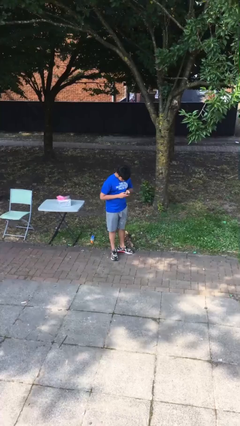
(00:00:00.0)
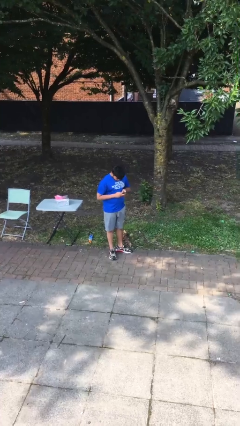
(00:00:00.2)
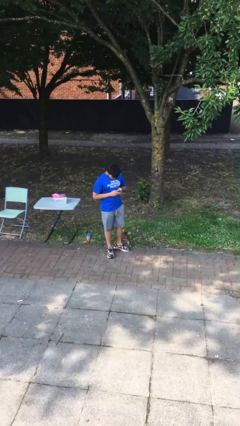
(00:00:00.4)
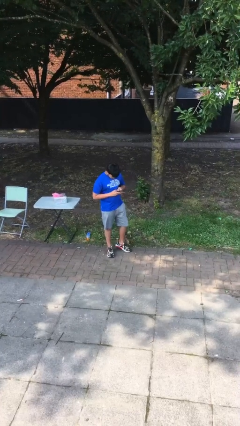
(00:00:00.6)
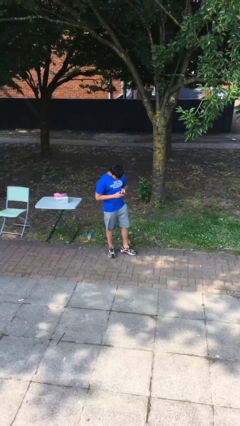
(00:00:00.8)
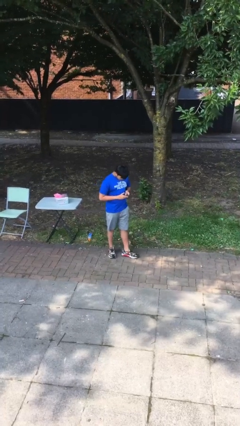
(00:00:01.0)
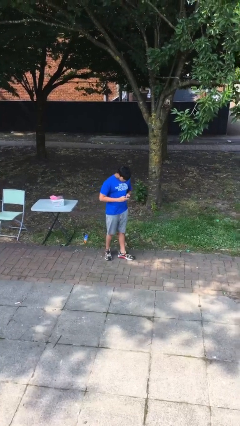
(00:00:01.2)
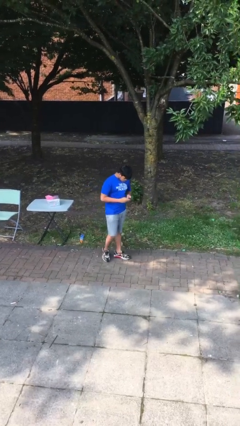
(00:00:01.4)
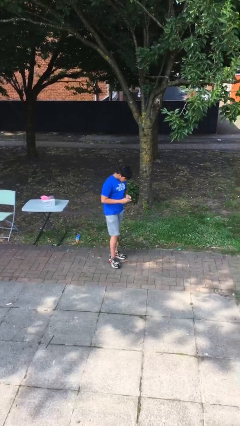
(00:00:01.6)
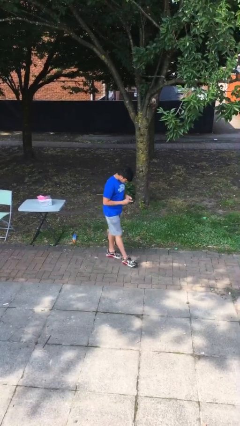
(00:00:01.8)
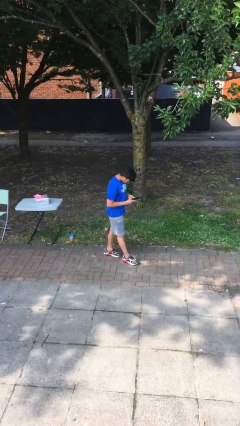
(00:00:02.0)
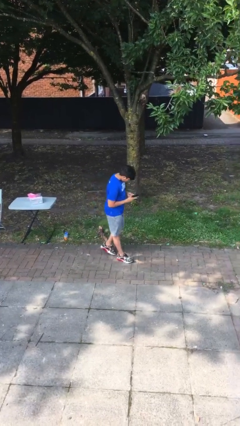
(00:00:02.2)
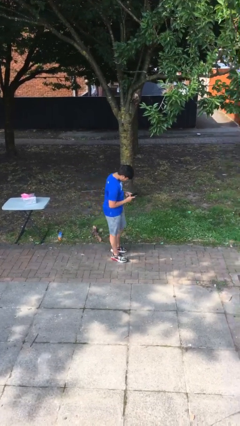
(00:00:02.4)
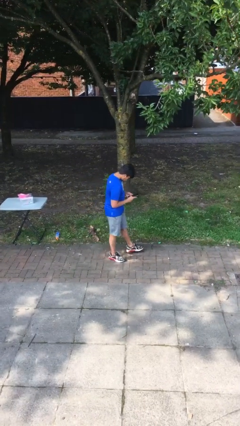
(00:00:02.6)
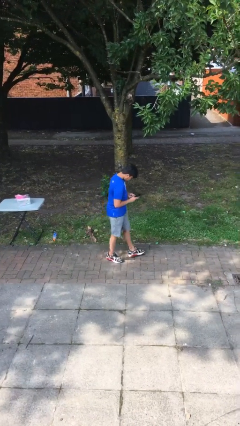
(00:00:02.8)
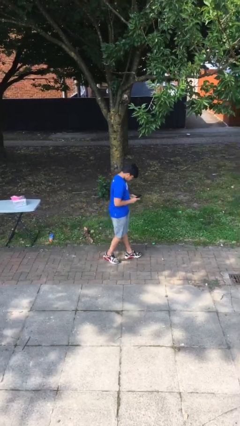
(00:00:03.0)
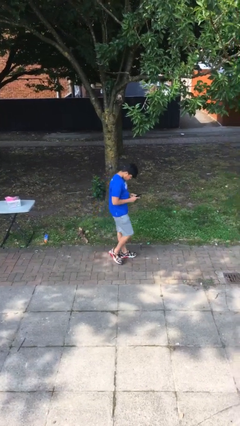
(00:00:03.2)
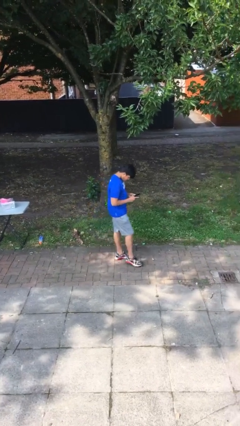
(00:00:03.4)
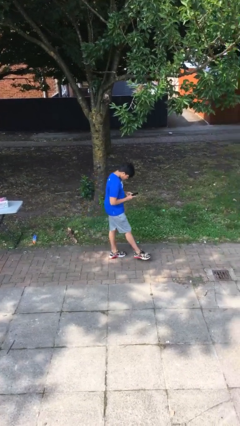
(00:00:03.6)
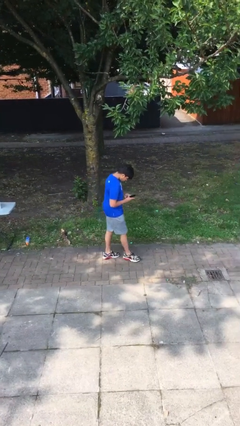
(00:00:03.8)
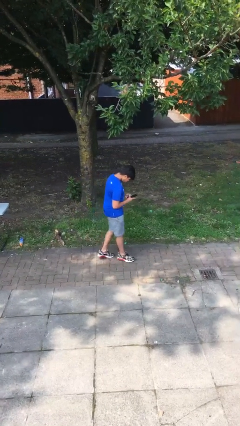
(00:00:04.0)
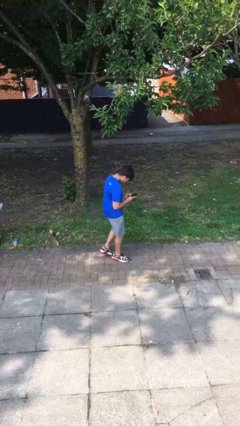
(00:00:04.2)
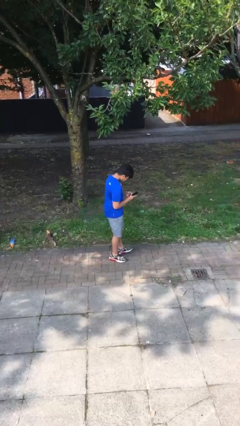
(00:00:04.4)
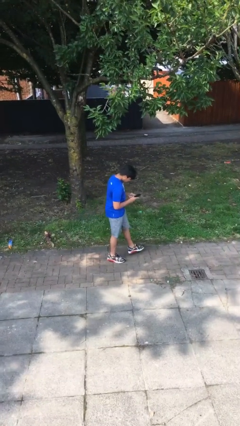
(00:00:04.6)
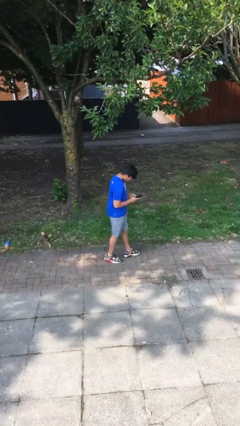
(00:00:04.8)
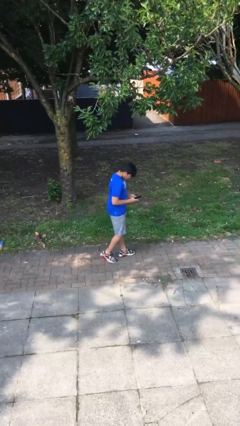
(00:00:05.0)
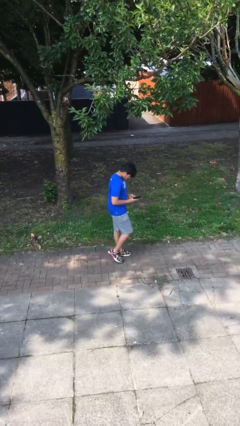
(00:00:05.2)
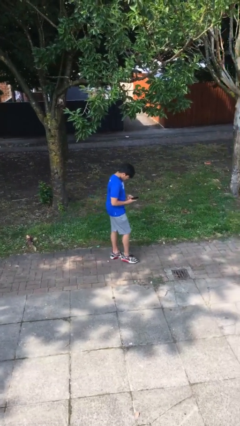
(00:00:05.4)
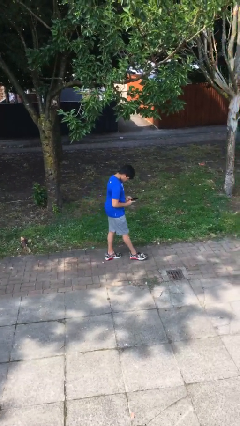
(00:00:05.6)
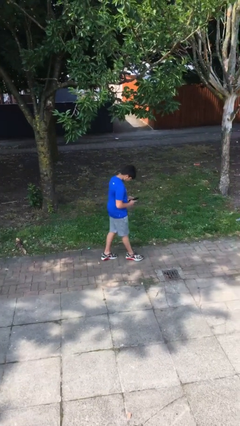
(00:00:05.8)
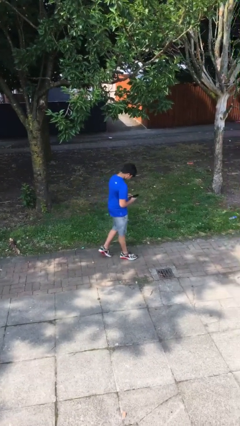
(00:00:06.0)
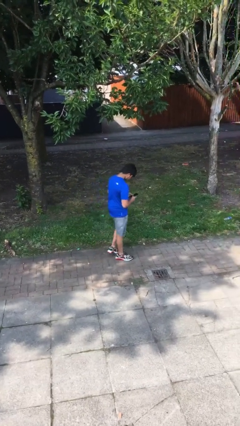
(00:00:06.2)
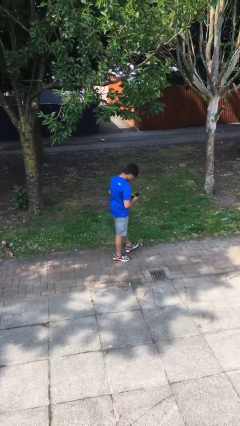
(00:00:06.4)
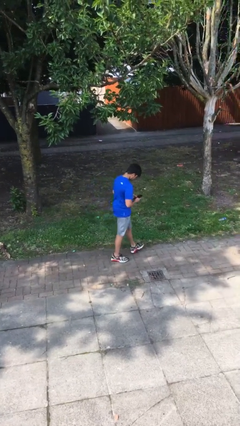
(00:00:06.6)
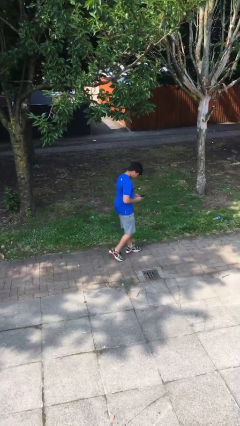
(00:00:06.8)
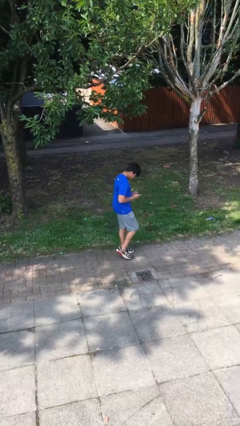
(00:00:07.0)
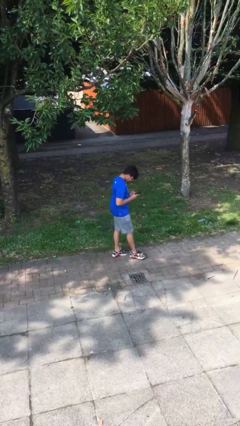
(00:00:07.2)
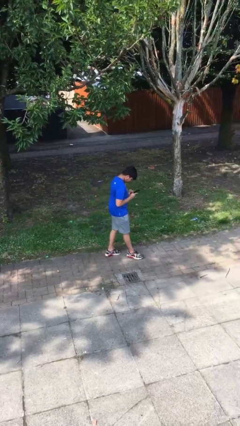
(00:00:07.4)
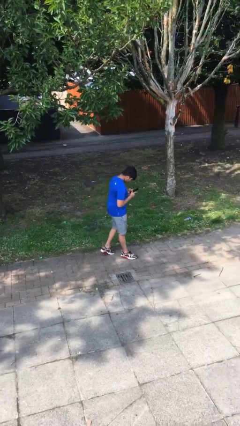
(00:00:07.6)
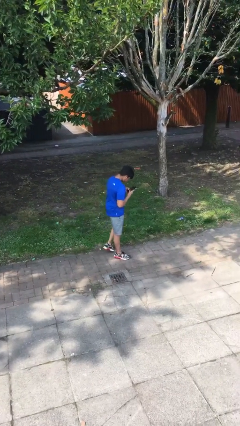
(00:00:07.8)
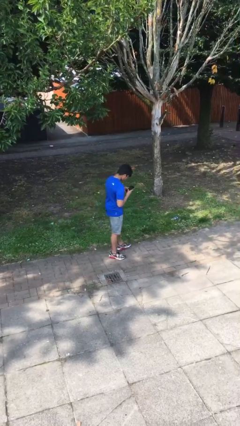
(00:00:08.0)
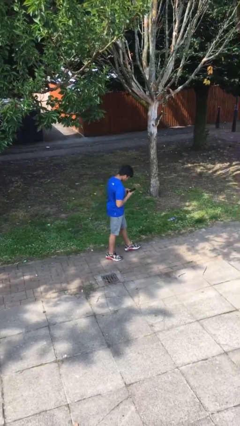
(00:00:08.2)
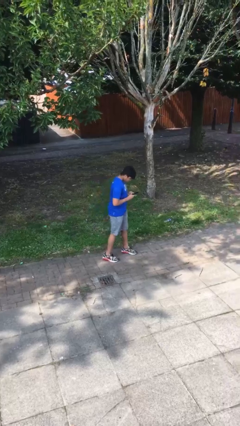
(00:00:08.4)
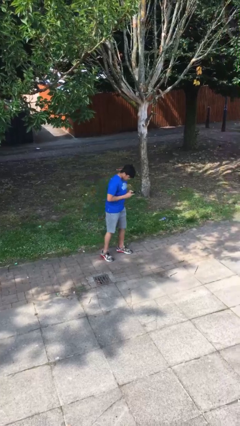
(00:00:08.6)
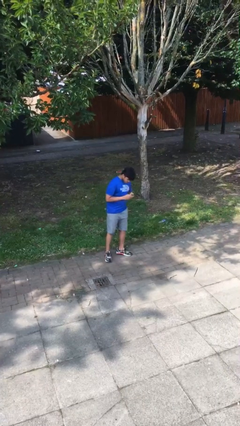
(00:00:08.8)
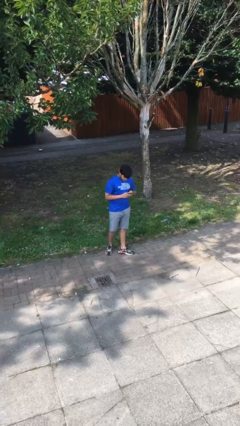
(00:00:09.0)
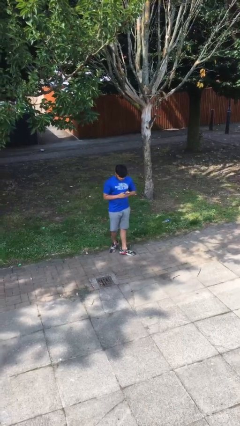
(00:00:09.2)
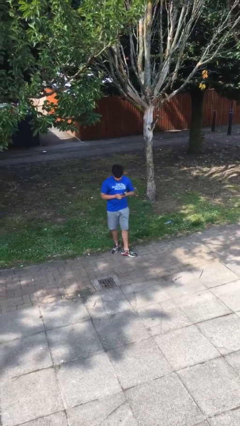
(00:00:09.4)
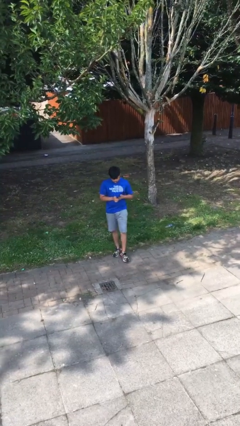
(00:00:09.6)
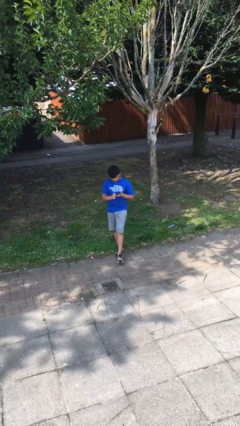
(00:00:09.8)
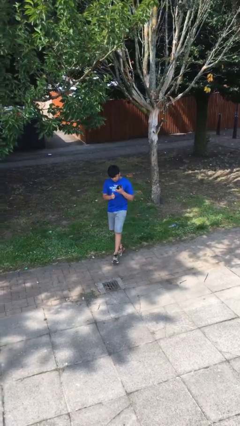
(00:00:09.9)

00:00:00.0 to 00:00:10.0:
person texts on phone

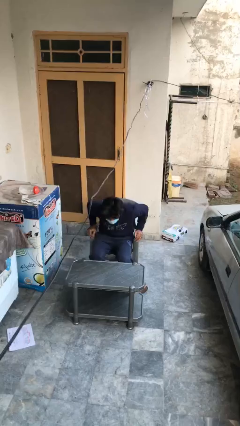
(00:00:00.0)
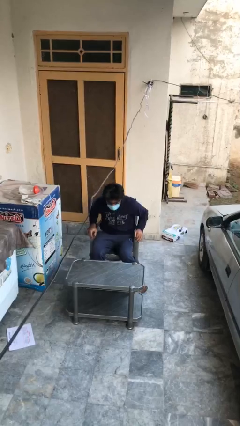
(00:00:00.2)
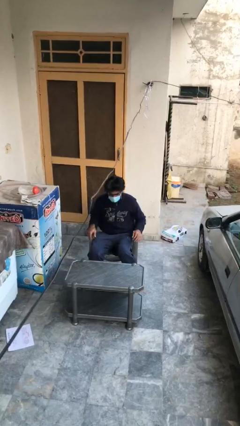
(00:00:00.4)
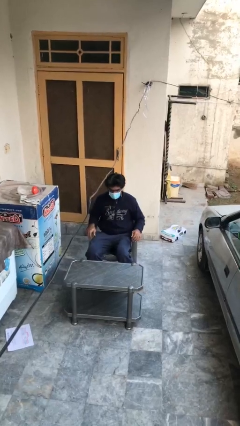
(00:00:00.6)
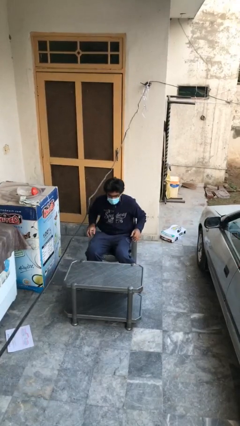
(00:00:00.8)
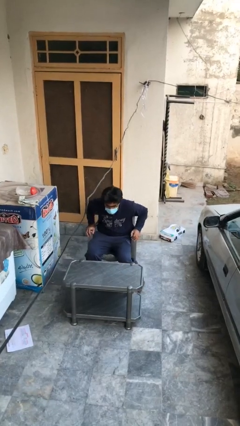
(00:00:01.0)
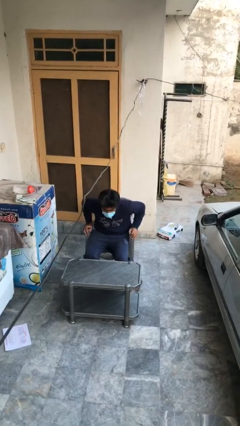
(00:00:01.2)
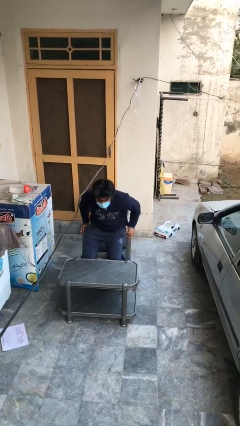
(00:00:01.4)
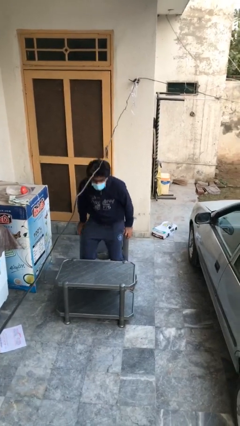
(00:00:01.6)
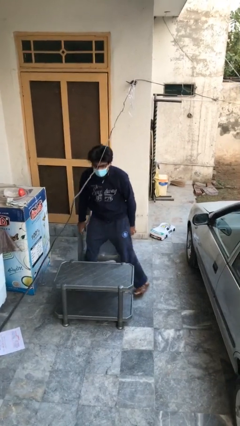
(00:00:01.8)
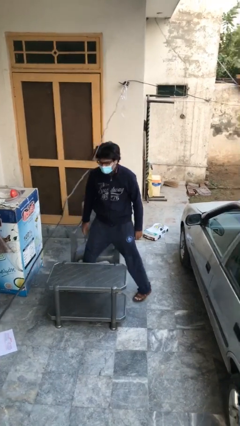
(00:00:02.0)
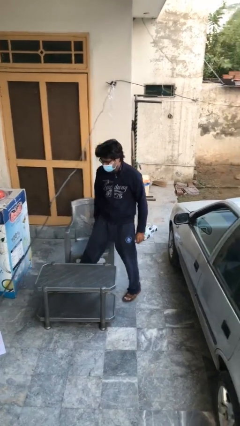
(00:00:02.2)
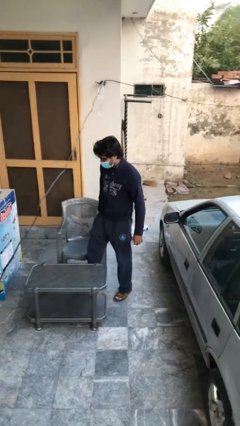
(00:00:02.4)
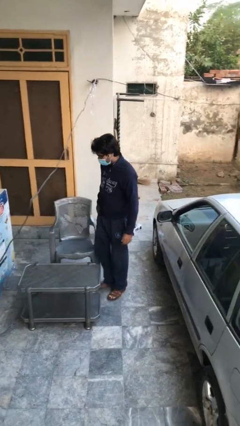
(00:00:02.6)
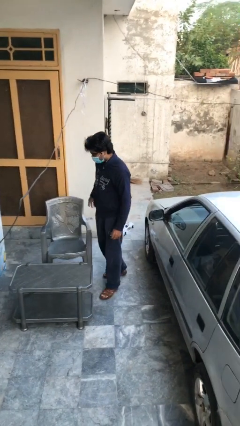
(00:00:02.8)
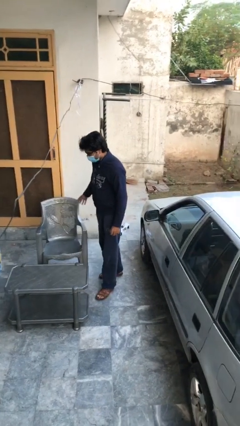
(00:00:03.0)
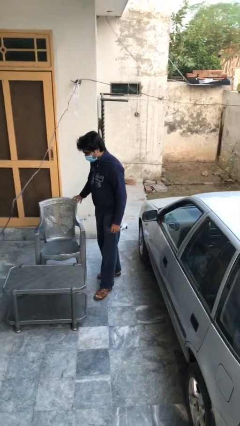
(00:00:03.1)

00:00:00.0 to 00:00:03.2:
person stands up

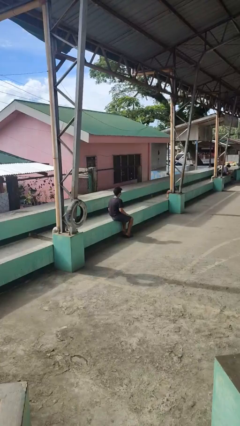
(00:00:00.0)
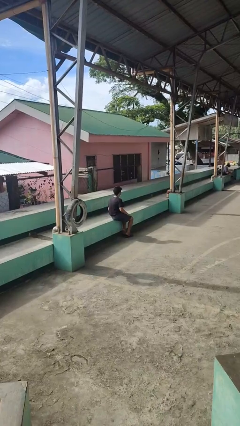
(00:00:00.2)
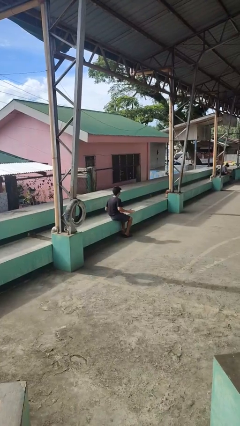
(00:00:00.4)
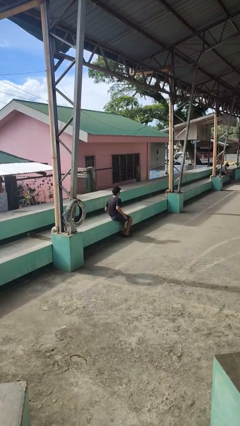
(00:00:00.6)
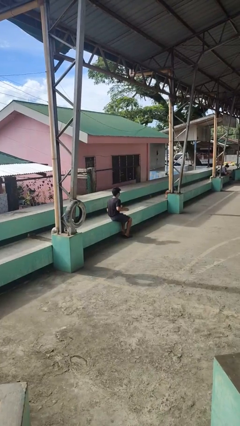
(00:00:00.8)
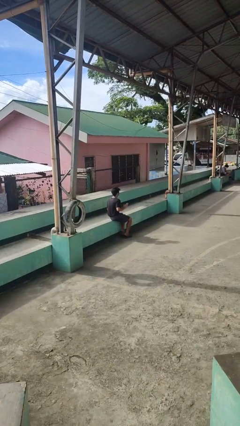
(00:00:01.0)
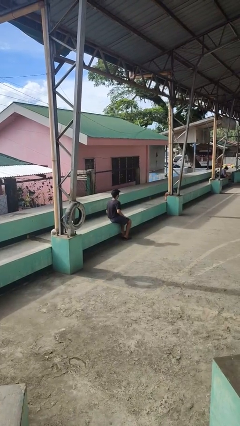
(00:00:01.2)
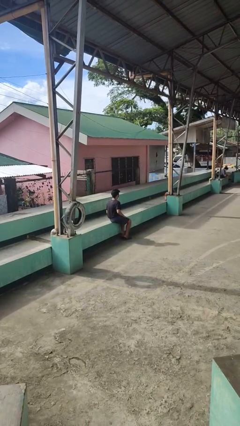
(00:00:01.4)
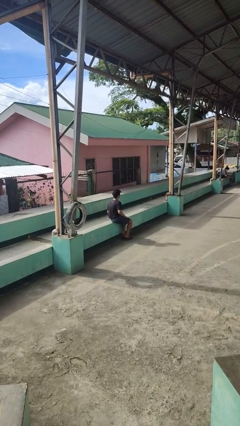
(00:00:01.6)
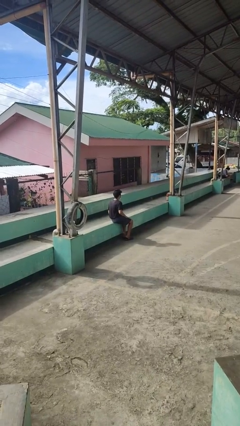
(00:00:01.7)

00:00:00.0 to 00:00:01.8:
person slaps hands on thighs

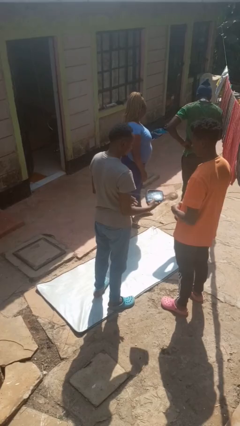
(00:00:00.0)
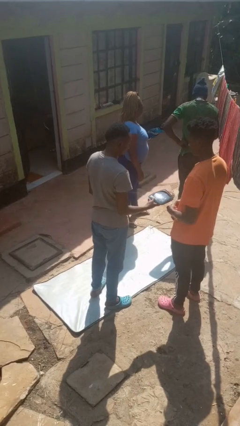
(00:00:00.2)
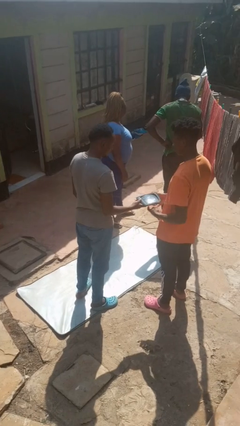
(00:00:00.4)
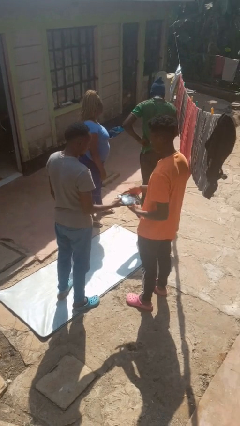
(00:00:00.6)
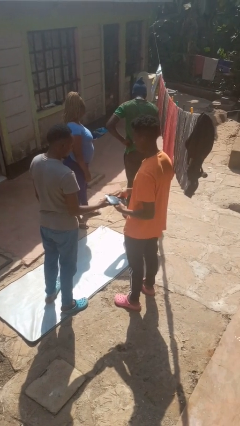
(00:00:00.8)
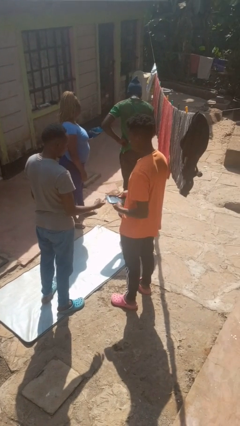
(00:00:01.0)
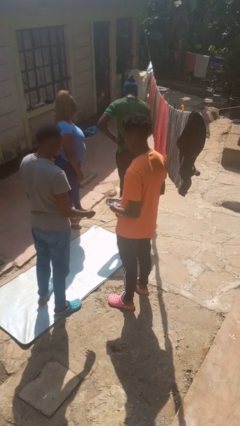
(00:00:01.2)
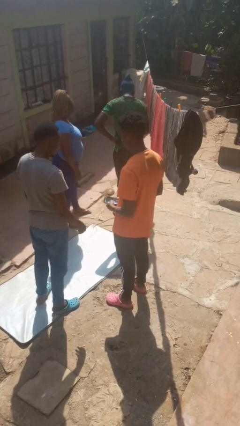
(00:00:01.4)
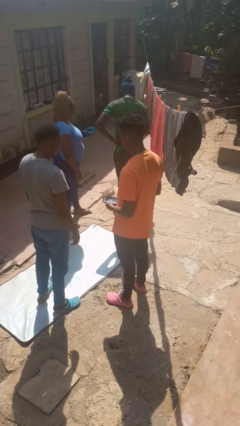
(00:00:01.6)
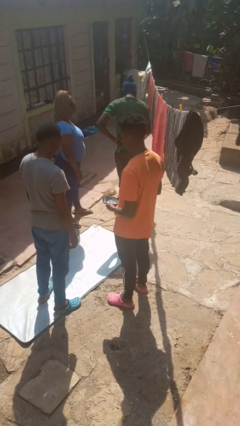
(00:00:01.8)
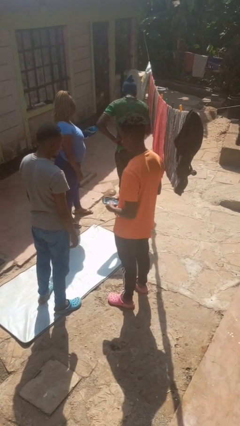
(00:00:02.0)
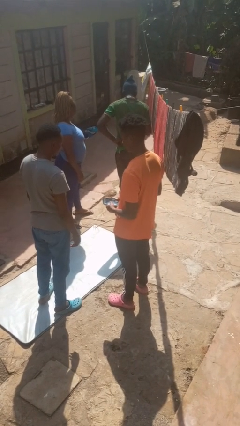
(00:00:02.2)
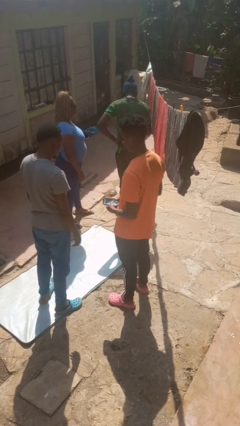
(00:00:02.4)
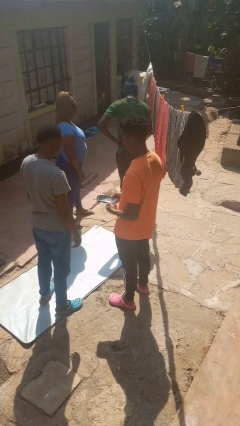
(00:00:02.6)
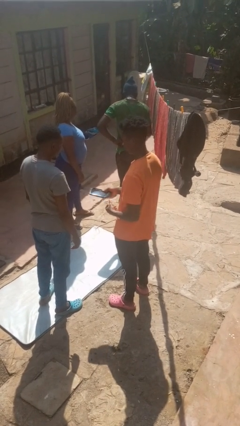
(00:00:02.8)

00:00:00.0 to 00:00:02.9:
person transfers object to person
